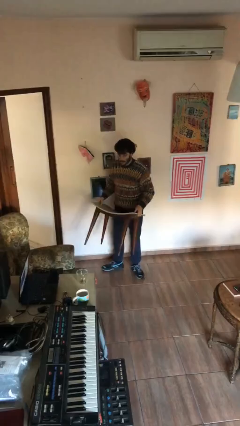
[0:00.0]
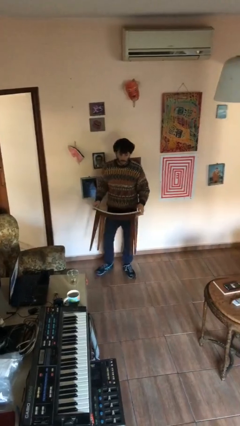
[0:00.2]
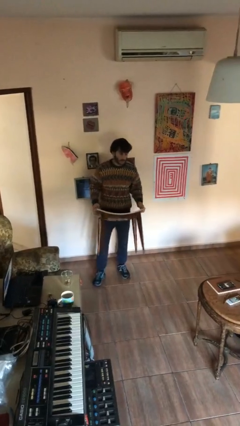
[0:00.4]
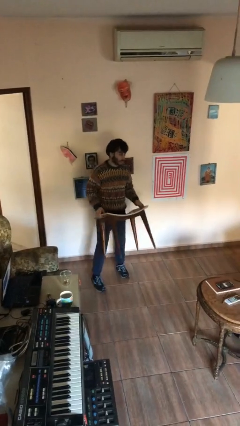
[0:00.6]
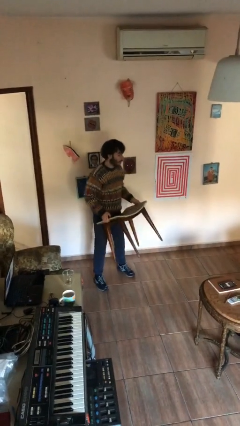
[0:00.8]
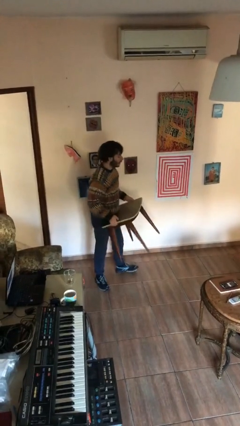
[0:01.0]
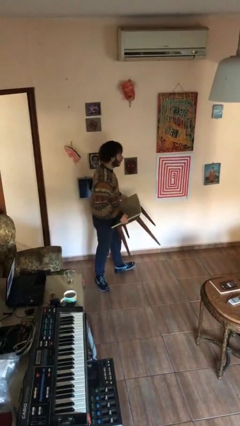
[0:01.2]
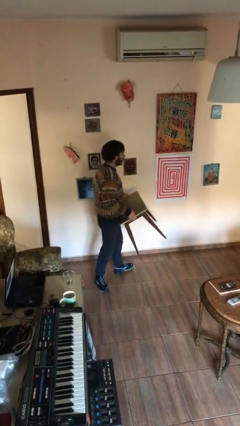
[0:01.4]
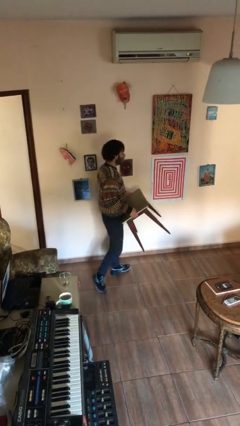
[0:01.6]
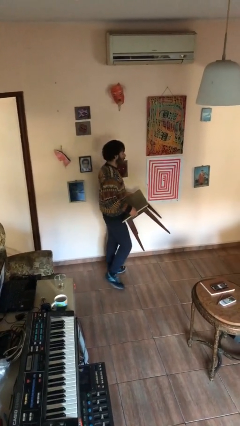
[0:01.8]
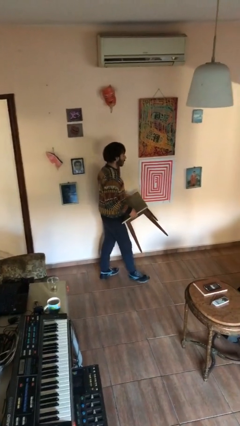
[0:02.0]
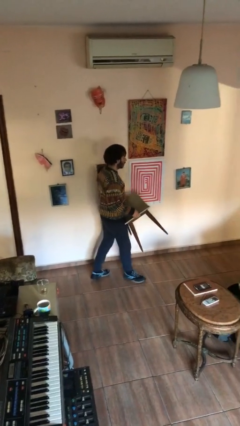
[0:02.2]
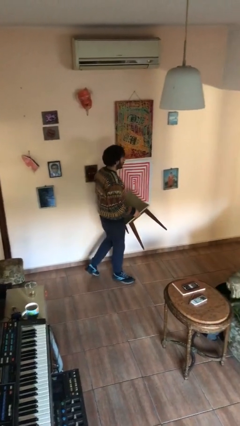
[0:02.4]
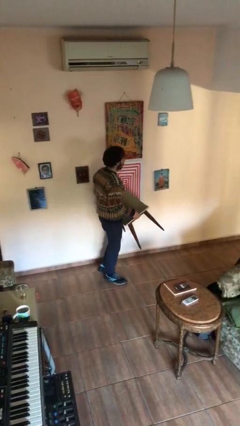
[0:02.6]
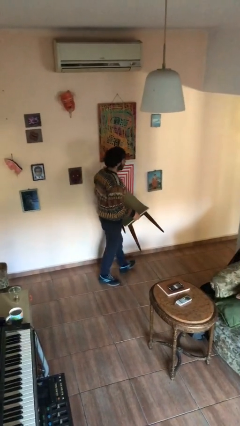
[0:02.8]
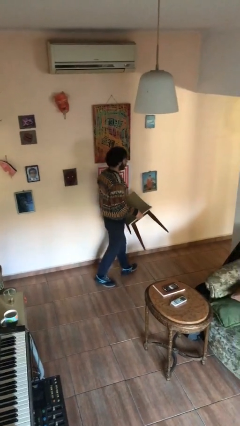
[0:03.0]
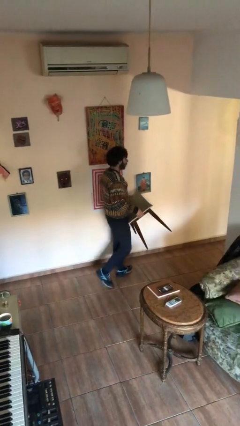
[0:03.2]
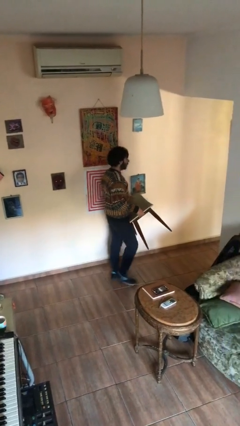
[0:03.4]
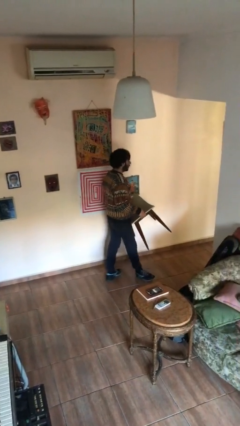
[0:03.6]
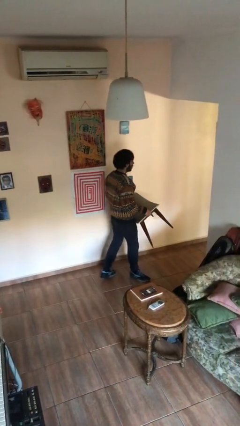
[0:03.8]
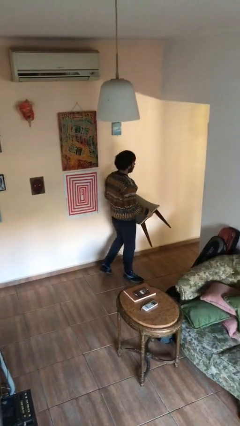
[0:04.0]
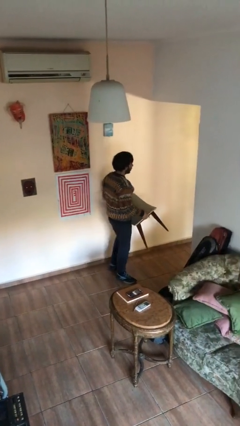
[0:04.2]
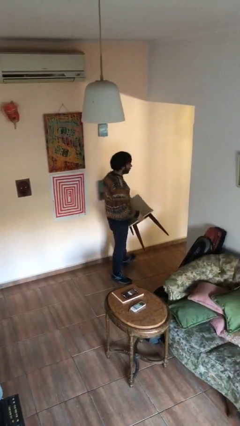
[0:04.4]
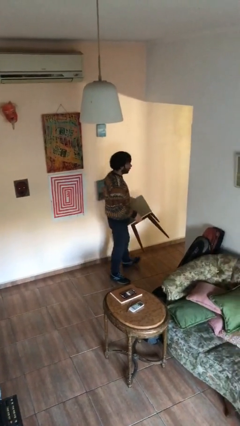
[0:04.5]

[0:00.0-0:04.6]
person carries furniture

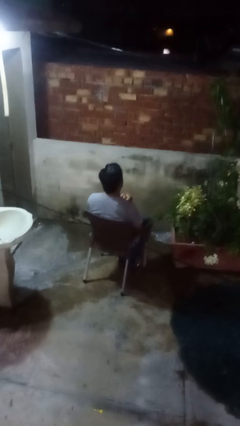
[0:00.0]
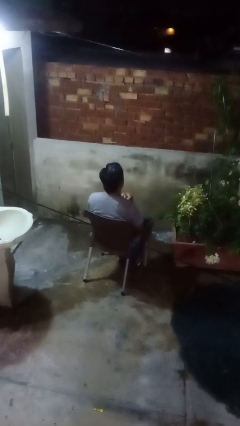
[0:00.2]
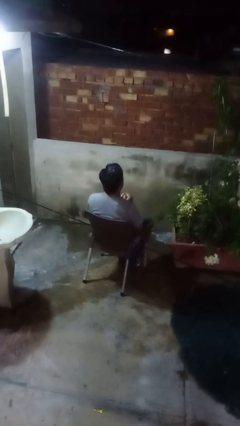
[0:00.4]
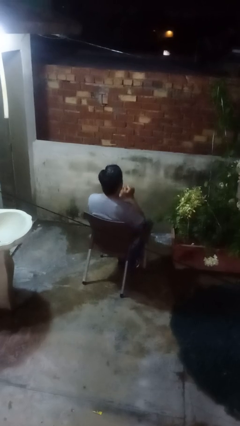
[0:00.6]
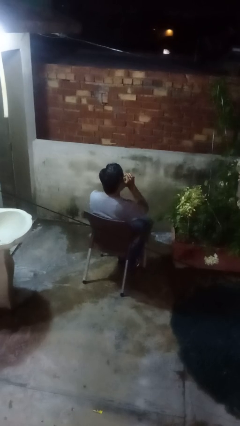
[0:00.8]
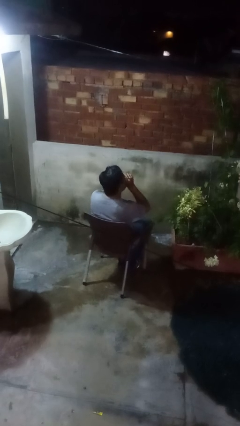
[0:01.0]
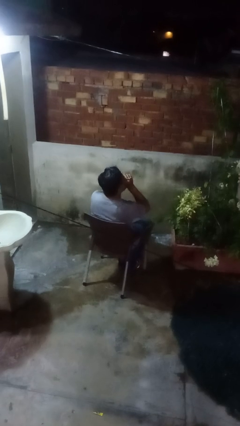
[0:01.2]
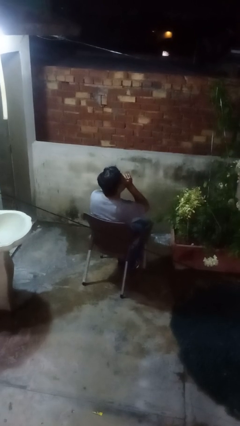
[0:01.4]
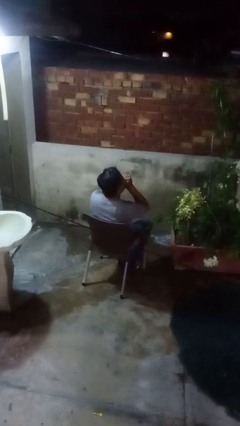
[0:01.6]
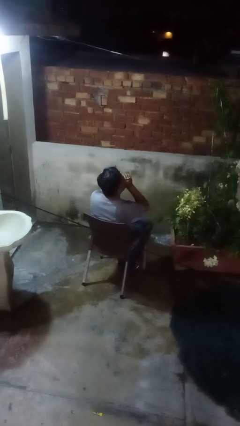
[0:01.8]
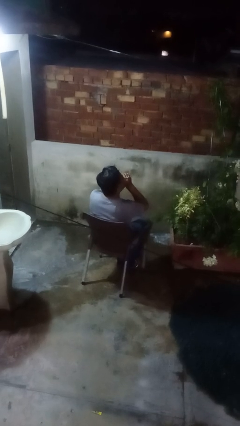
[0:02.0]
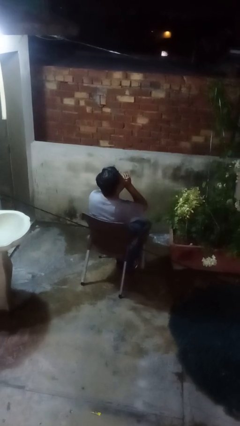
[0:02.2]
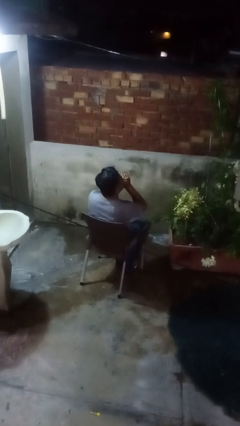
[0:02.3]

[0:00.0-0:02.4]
person blows into hands

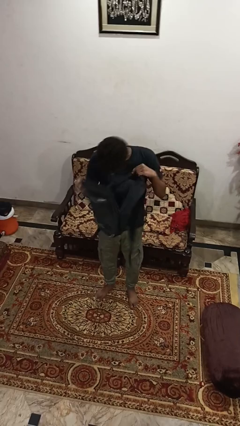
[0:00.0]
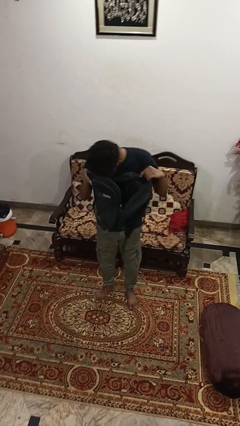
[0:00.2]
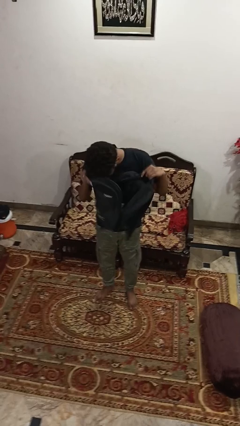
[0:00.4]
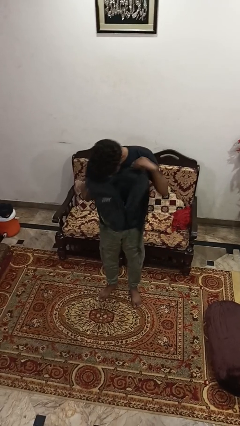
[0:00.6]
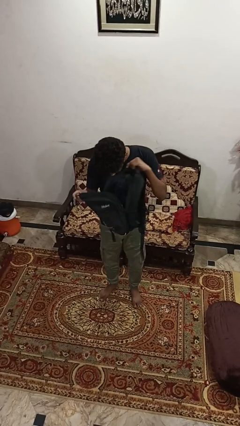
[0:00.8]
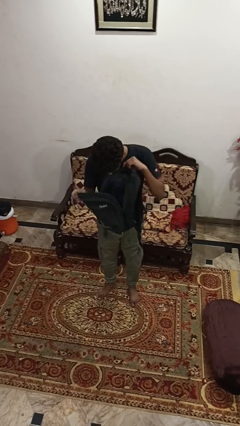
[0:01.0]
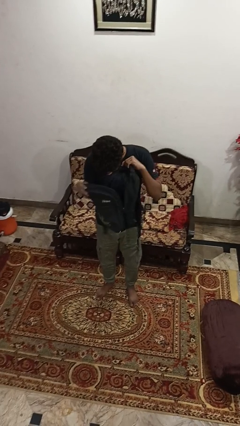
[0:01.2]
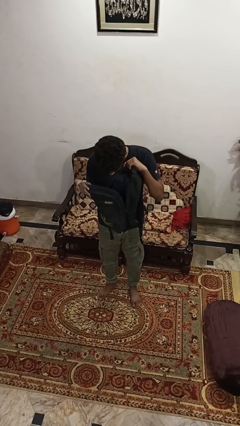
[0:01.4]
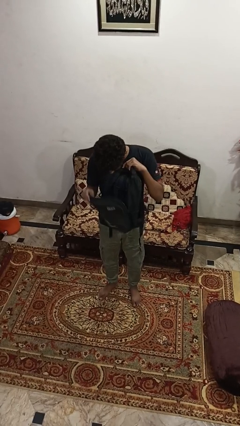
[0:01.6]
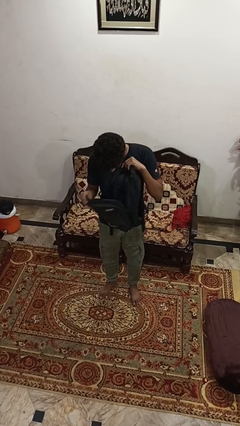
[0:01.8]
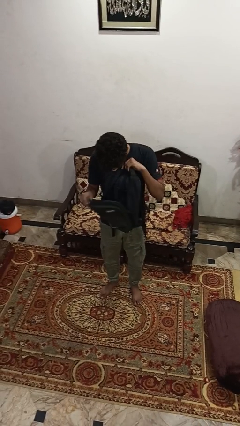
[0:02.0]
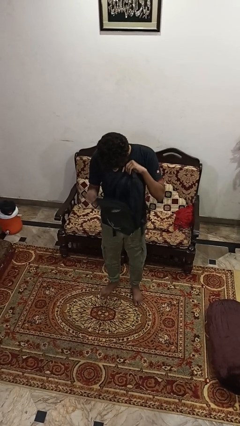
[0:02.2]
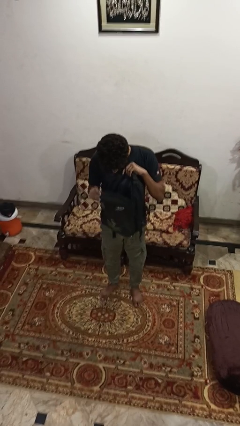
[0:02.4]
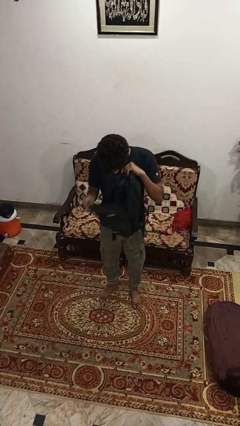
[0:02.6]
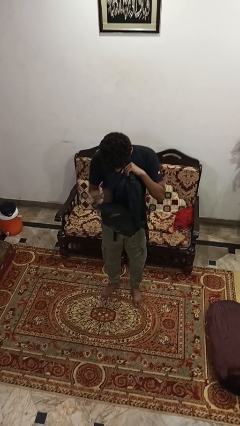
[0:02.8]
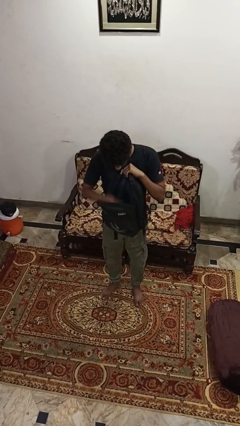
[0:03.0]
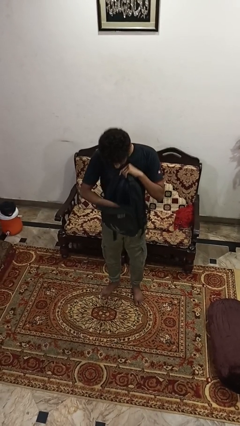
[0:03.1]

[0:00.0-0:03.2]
person searches in backpack

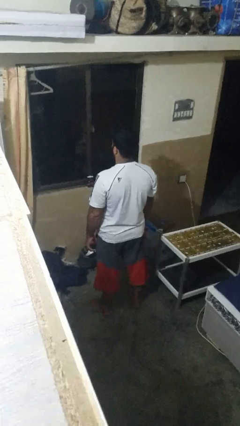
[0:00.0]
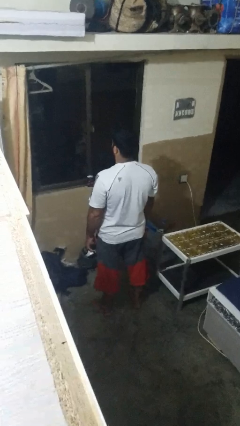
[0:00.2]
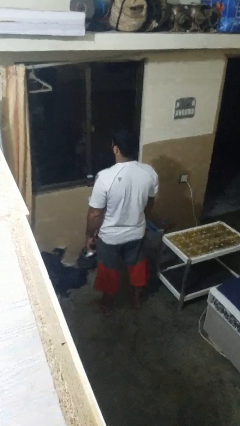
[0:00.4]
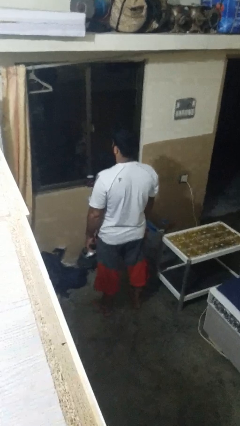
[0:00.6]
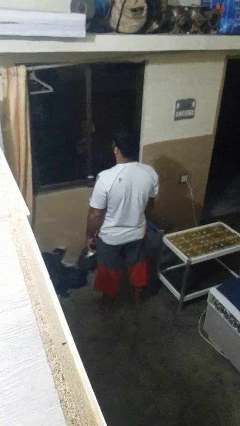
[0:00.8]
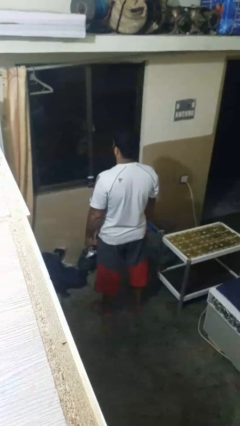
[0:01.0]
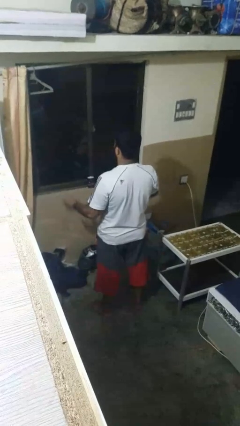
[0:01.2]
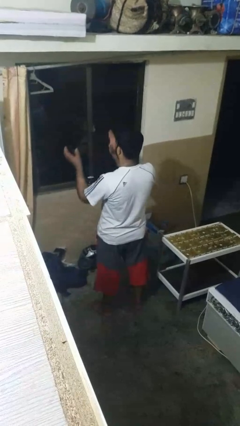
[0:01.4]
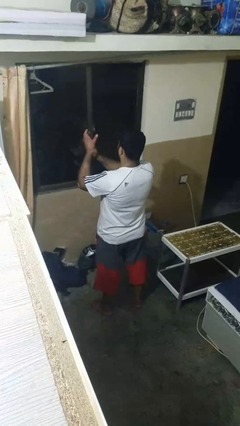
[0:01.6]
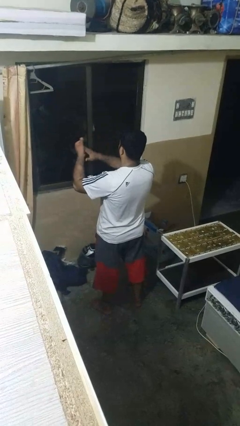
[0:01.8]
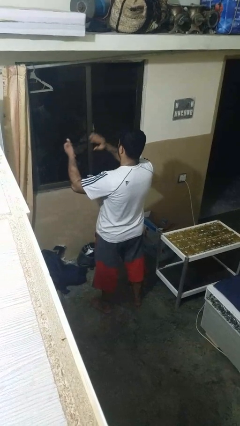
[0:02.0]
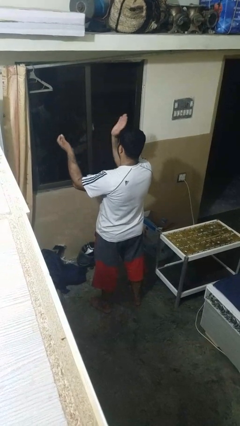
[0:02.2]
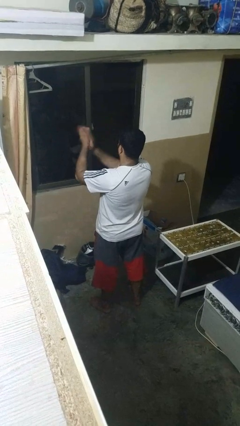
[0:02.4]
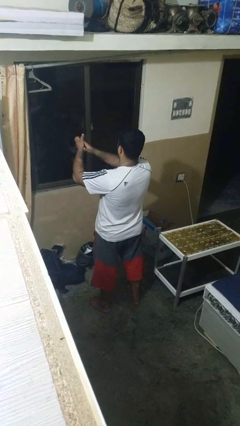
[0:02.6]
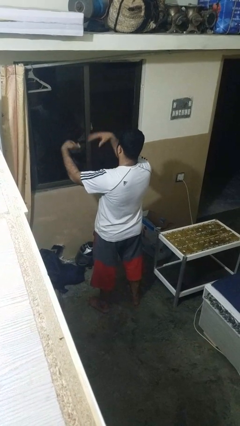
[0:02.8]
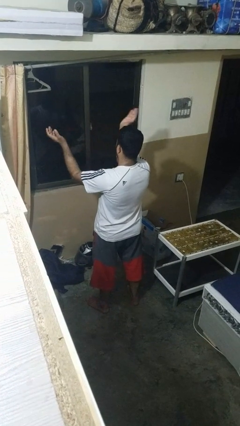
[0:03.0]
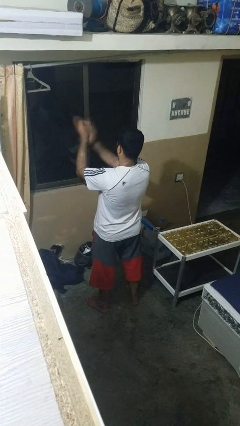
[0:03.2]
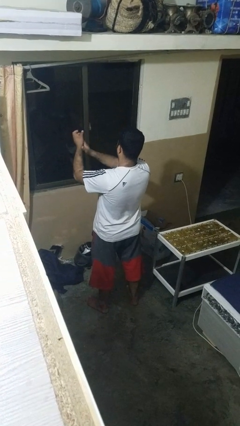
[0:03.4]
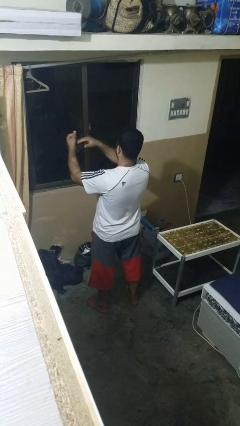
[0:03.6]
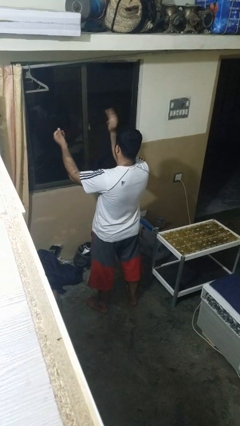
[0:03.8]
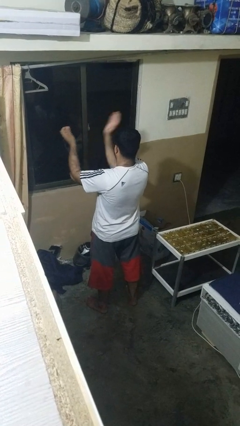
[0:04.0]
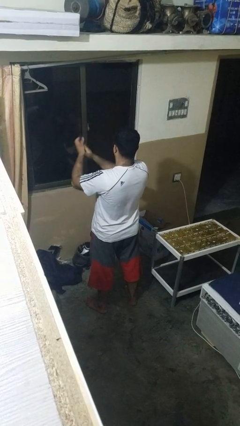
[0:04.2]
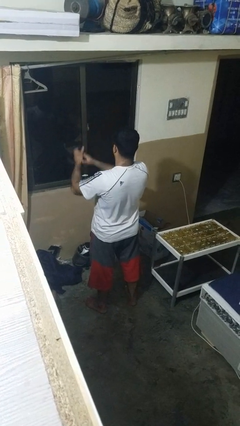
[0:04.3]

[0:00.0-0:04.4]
person claps hands

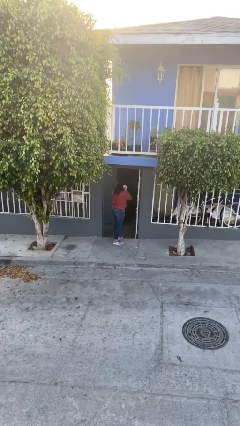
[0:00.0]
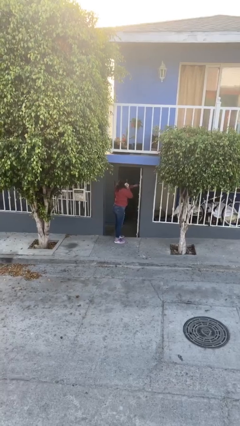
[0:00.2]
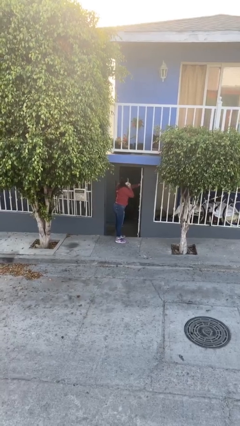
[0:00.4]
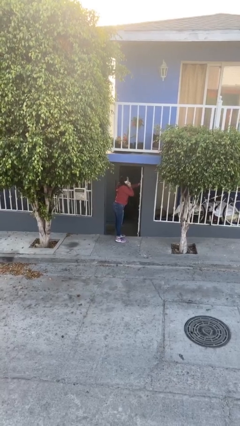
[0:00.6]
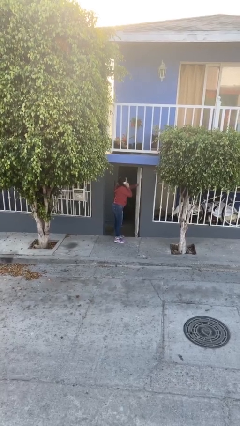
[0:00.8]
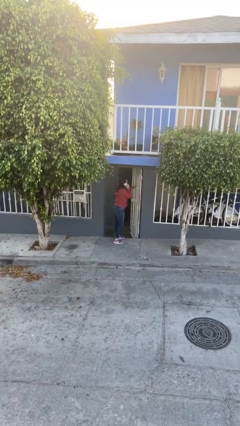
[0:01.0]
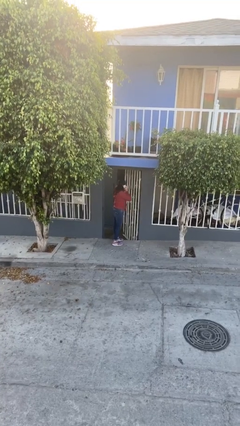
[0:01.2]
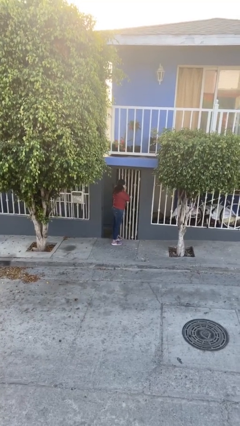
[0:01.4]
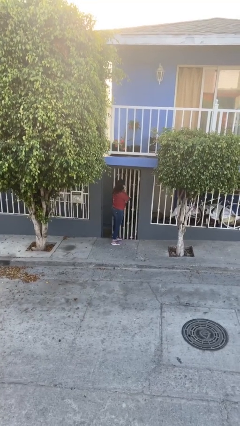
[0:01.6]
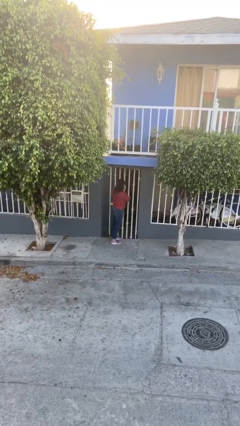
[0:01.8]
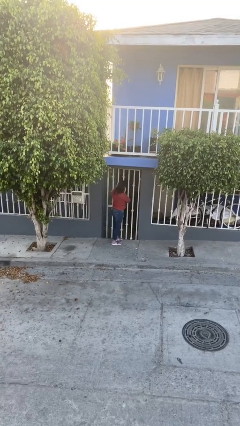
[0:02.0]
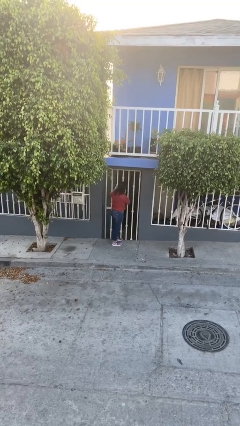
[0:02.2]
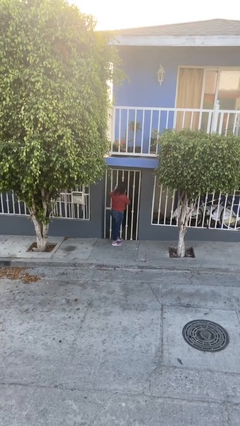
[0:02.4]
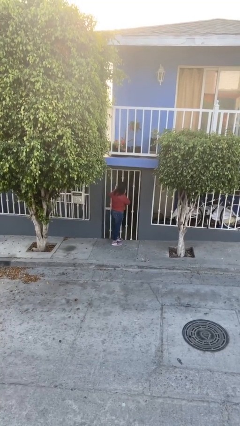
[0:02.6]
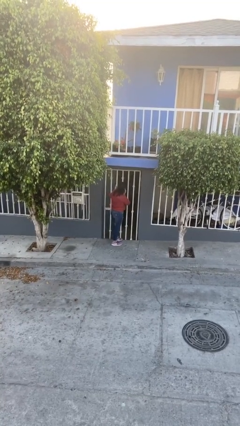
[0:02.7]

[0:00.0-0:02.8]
person closes facility door
